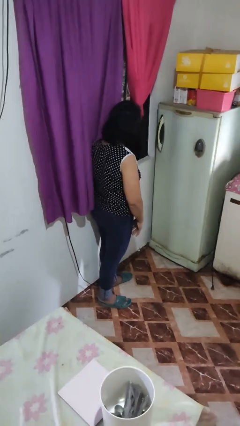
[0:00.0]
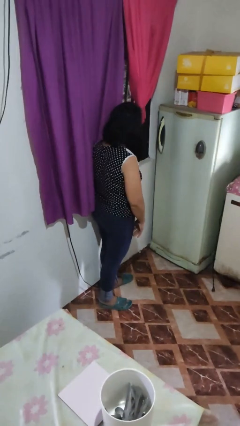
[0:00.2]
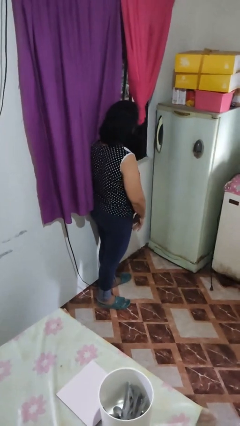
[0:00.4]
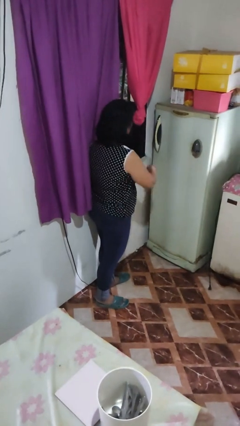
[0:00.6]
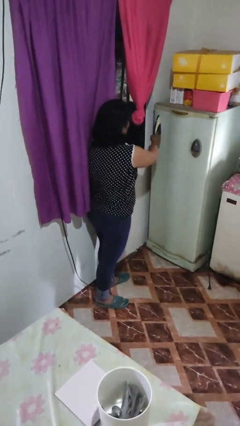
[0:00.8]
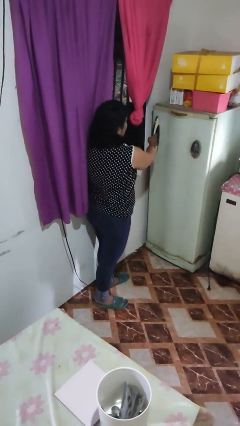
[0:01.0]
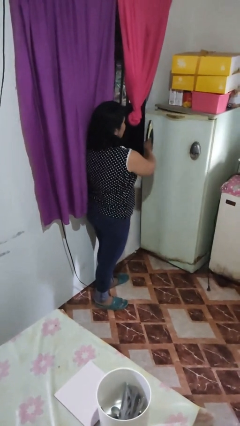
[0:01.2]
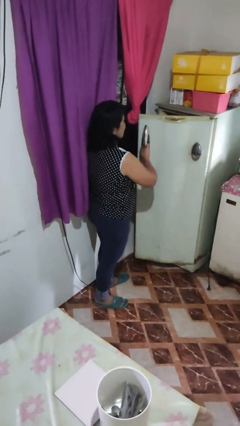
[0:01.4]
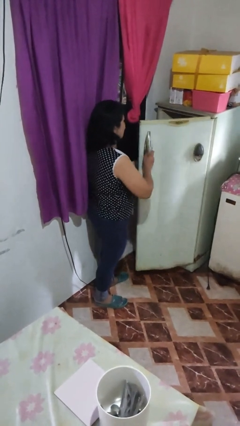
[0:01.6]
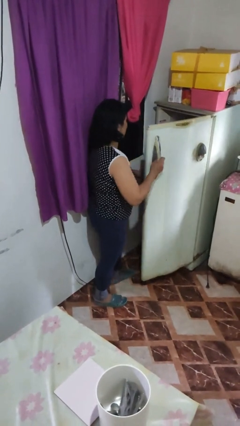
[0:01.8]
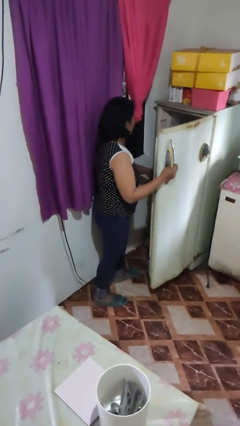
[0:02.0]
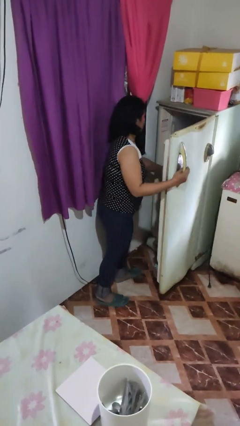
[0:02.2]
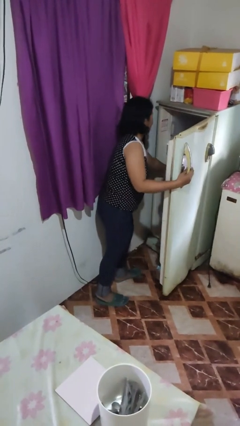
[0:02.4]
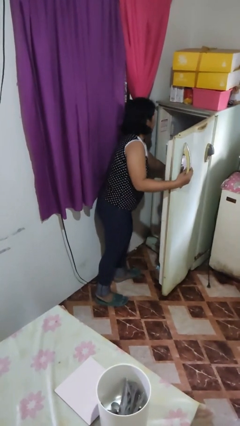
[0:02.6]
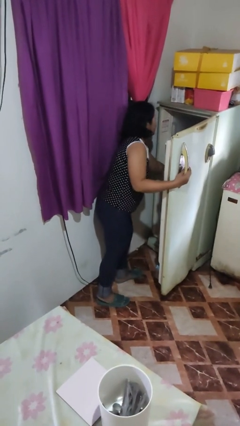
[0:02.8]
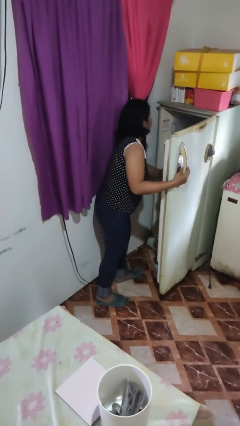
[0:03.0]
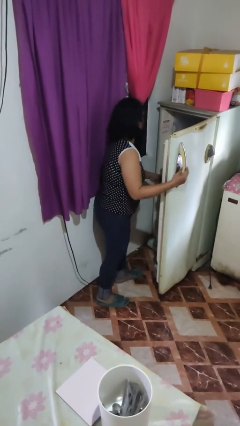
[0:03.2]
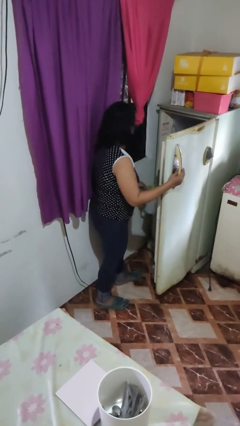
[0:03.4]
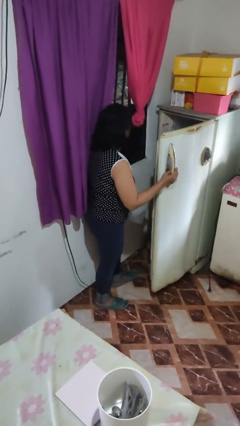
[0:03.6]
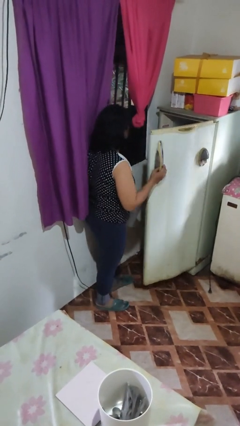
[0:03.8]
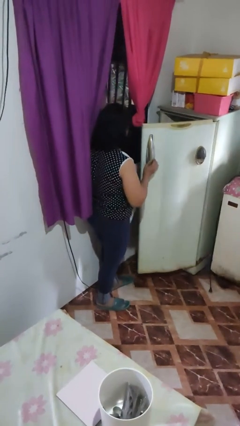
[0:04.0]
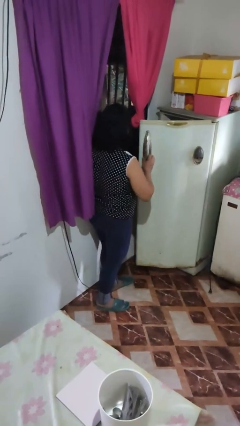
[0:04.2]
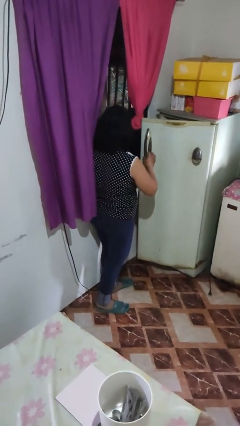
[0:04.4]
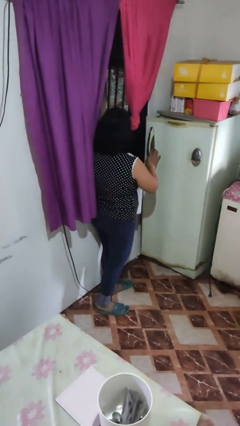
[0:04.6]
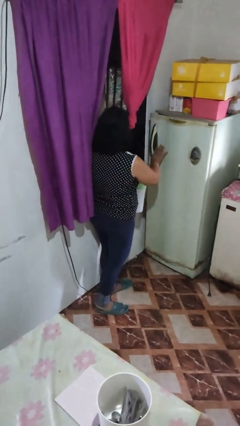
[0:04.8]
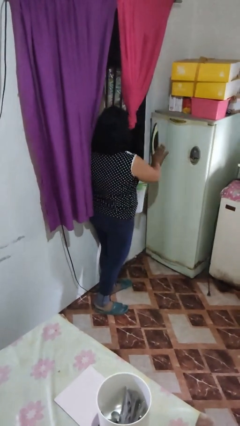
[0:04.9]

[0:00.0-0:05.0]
person takes object from refrigerator

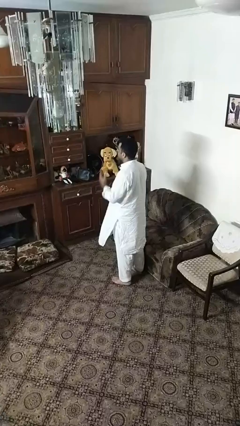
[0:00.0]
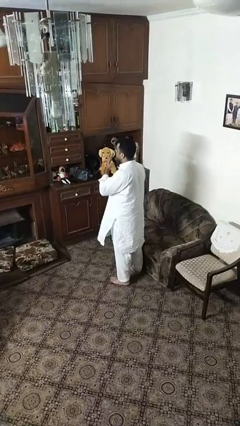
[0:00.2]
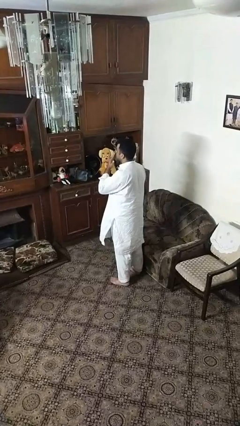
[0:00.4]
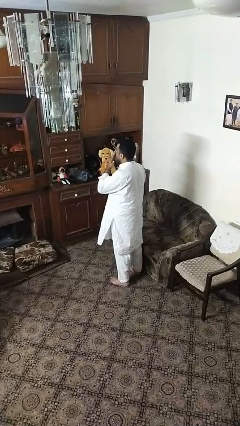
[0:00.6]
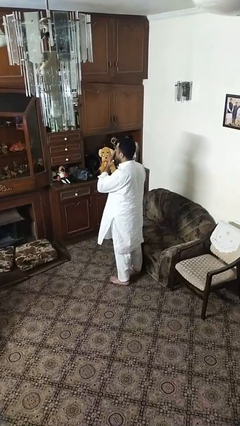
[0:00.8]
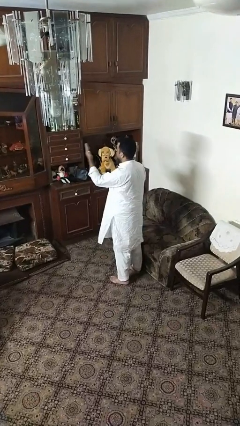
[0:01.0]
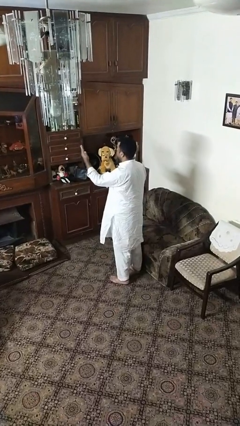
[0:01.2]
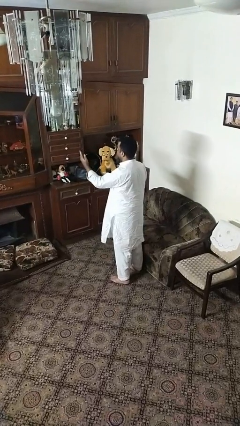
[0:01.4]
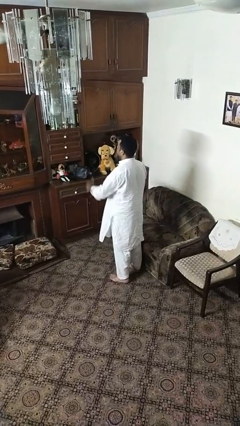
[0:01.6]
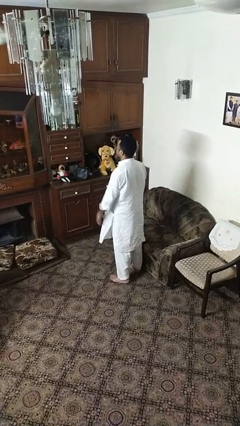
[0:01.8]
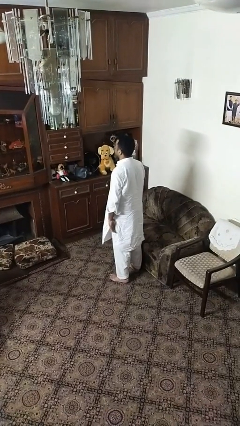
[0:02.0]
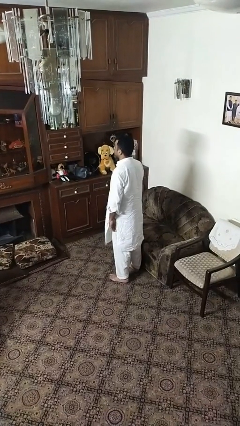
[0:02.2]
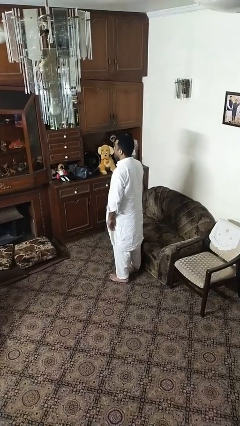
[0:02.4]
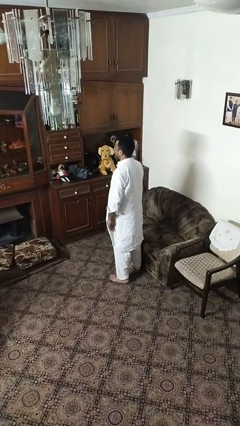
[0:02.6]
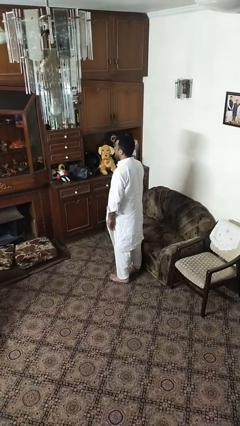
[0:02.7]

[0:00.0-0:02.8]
person gestures blow kiss

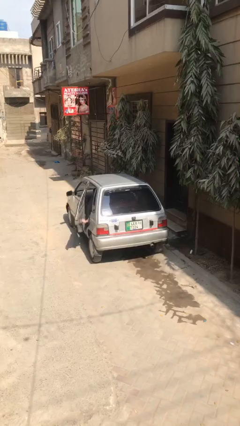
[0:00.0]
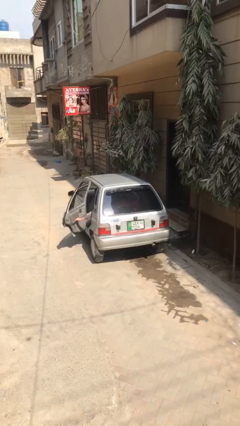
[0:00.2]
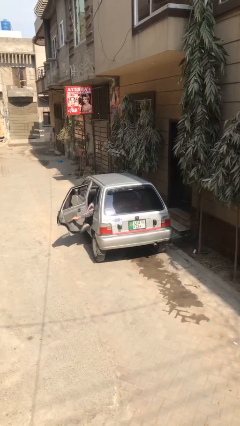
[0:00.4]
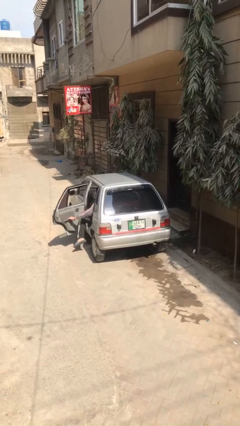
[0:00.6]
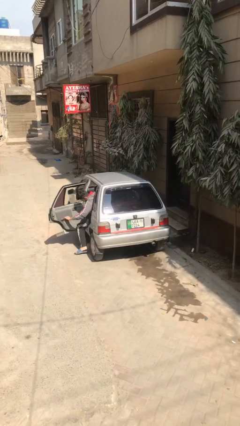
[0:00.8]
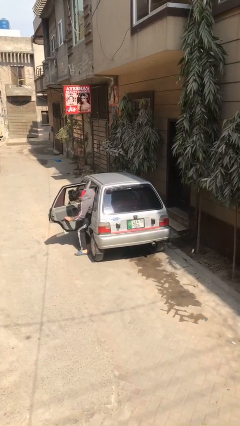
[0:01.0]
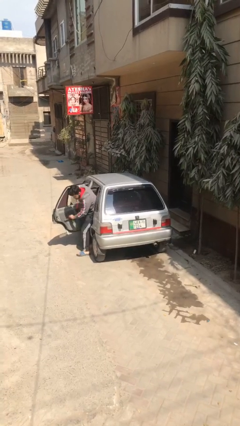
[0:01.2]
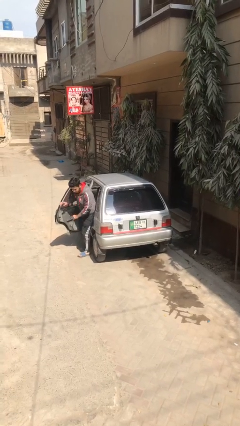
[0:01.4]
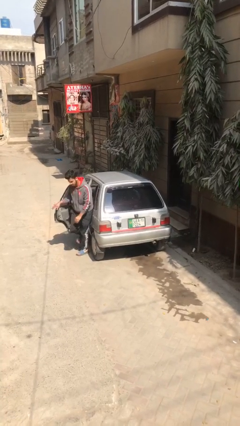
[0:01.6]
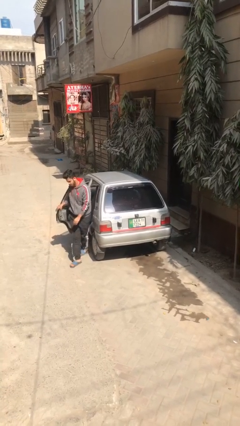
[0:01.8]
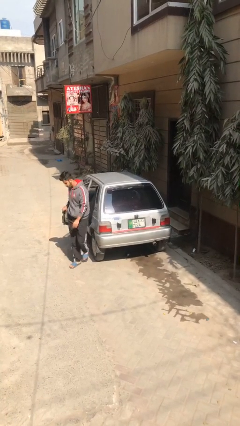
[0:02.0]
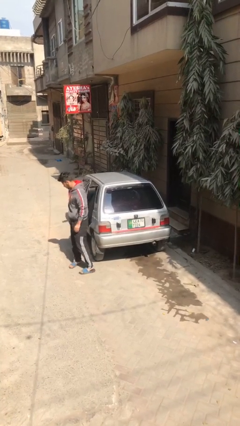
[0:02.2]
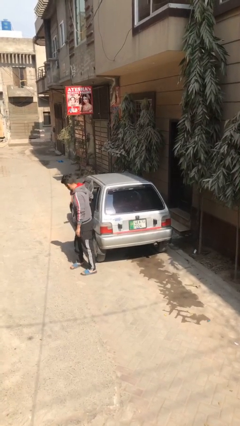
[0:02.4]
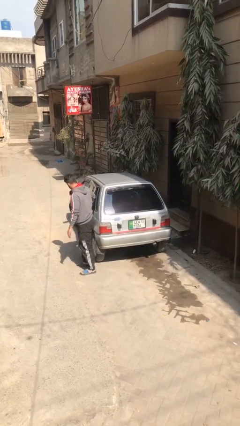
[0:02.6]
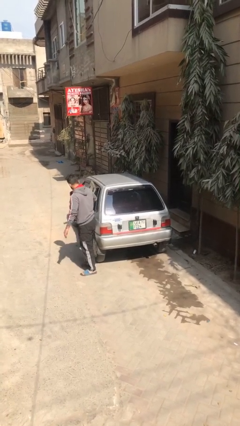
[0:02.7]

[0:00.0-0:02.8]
car drops off person

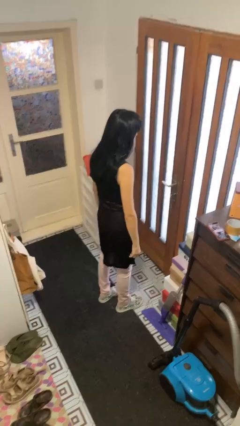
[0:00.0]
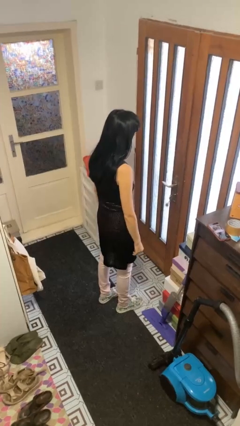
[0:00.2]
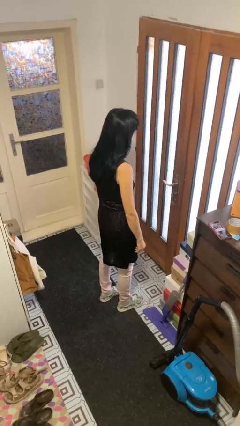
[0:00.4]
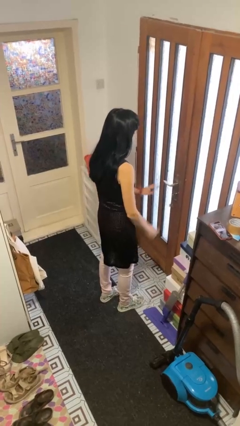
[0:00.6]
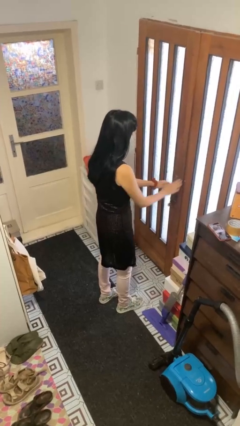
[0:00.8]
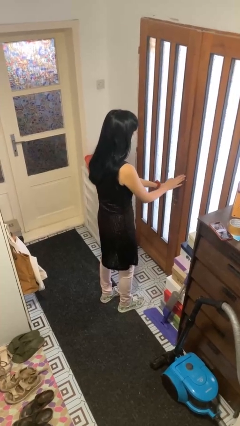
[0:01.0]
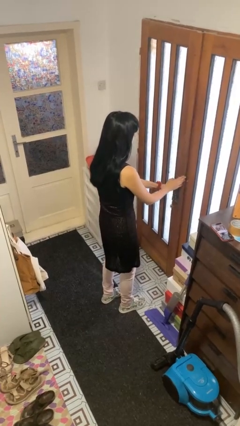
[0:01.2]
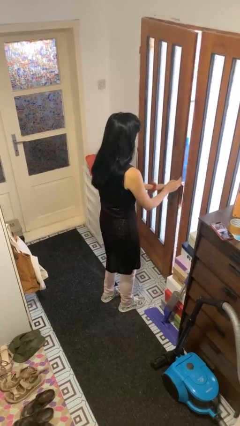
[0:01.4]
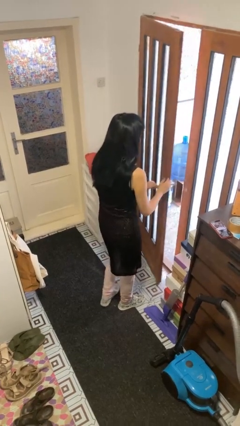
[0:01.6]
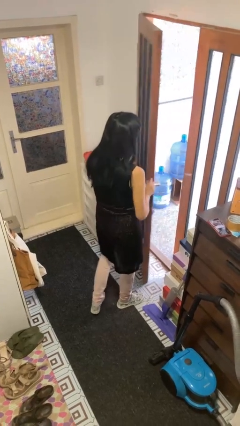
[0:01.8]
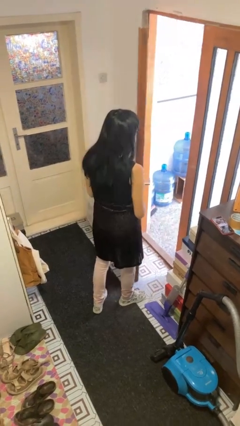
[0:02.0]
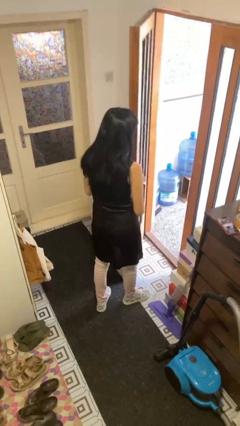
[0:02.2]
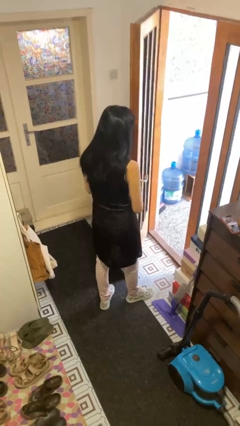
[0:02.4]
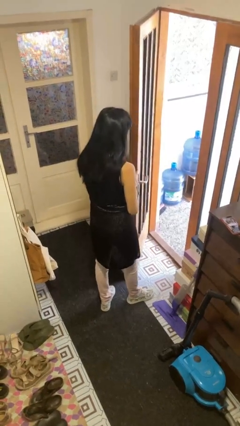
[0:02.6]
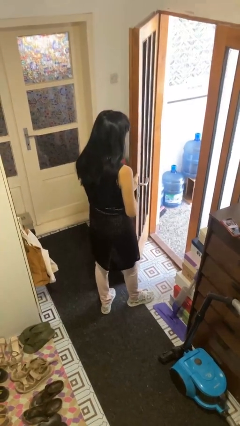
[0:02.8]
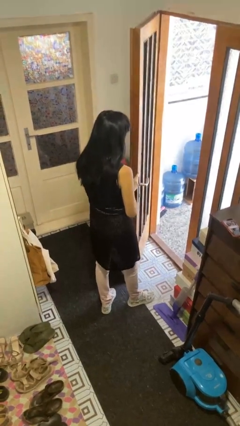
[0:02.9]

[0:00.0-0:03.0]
person opens facility door

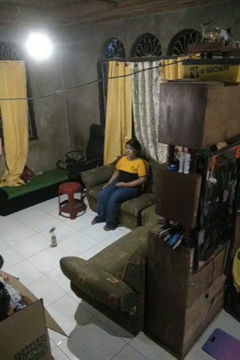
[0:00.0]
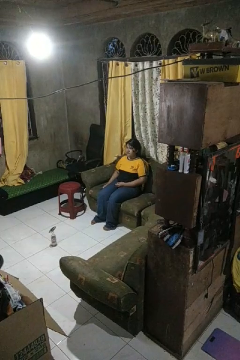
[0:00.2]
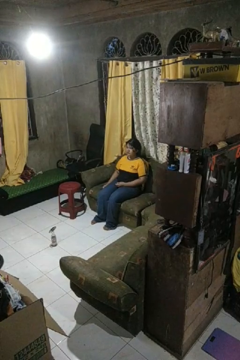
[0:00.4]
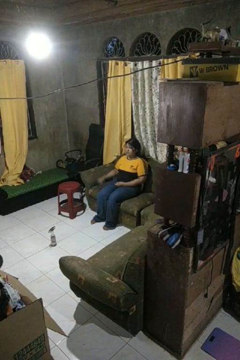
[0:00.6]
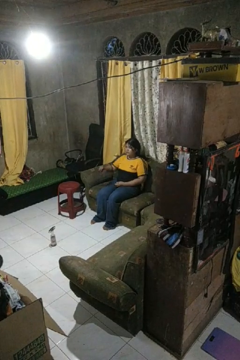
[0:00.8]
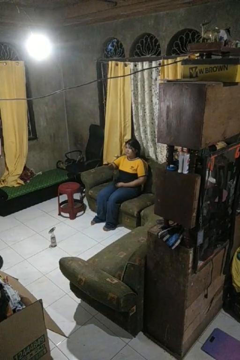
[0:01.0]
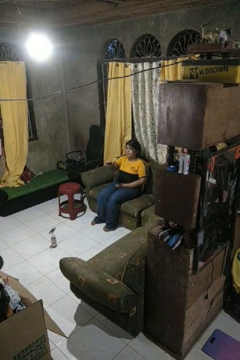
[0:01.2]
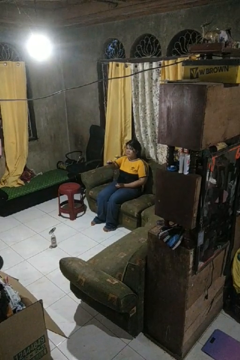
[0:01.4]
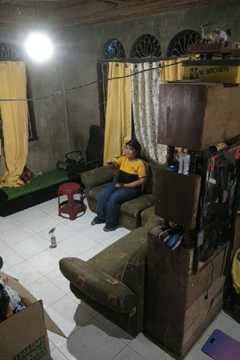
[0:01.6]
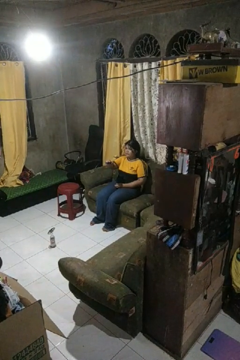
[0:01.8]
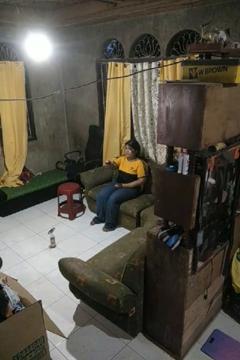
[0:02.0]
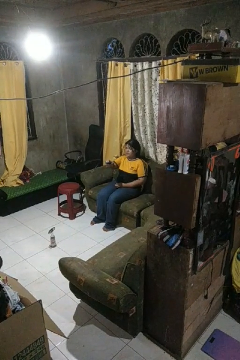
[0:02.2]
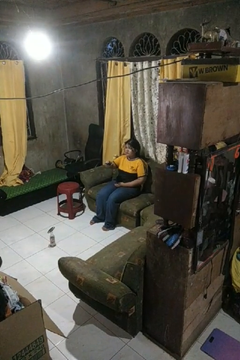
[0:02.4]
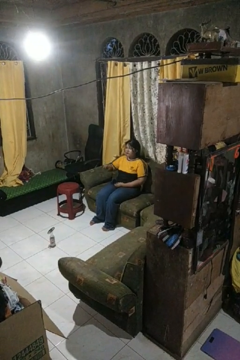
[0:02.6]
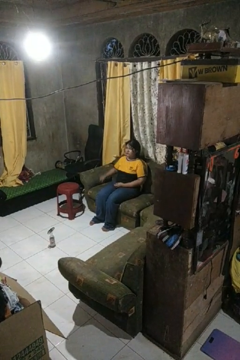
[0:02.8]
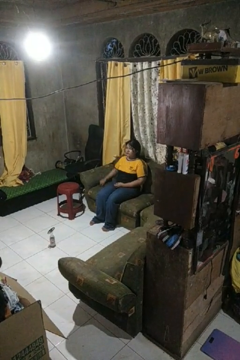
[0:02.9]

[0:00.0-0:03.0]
person uses television remote

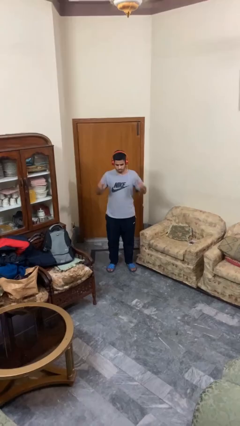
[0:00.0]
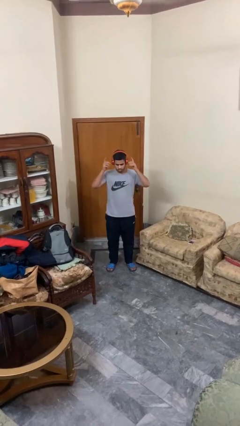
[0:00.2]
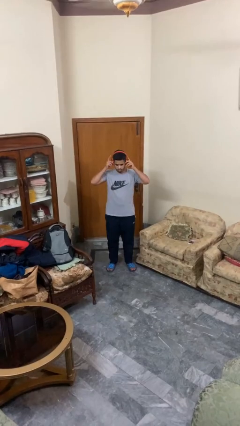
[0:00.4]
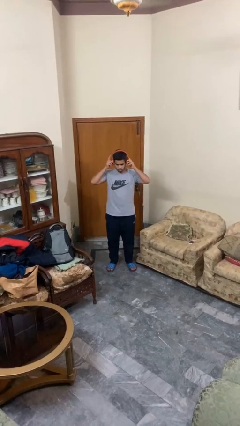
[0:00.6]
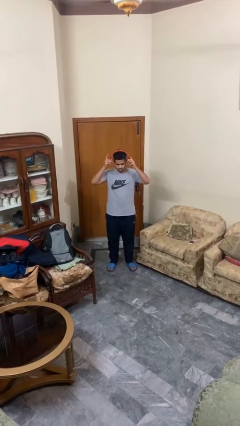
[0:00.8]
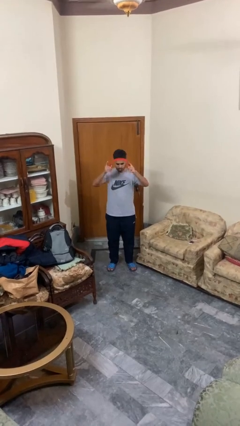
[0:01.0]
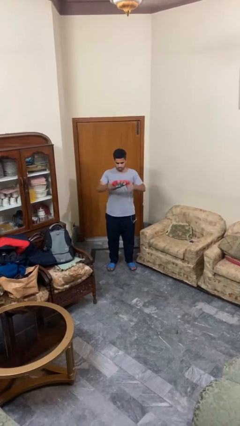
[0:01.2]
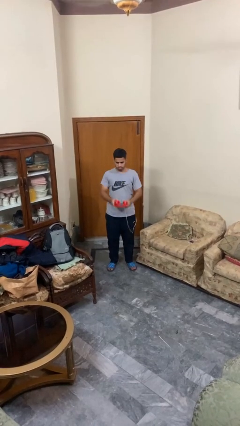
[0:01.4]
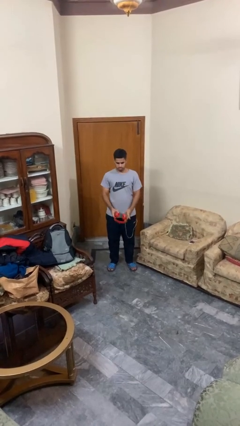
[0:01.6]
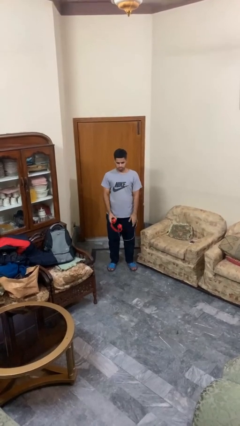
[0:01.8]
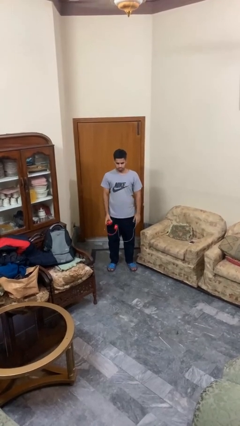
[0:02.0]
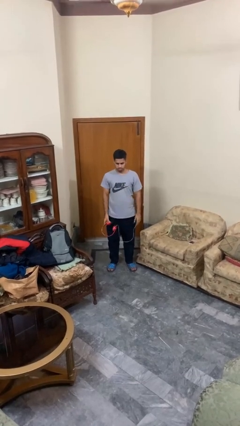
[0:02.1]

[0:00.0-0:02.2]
person takes off headphones
